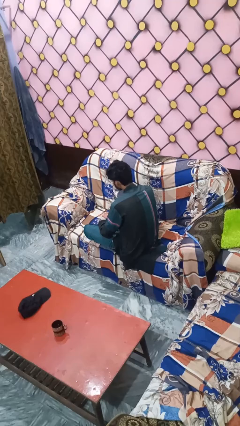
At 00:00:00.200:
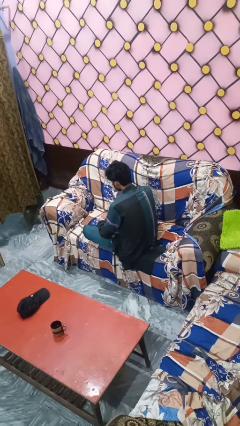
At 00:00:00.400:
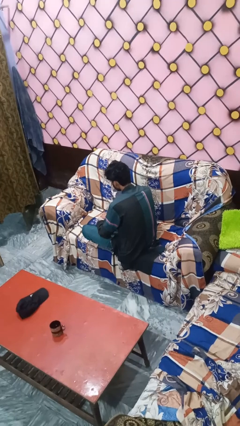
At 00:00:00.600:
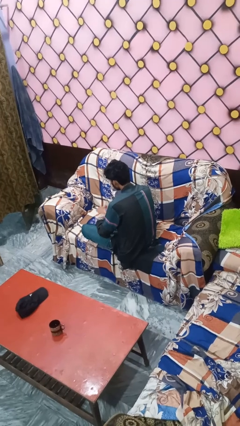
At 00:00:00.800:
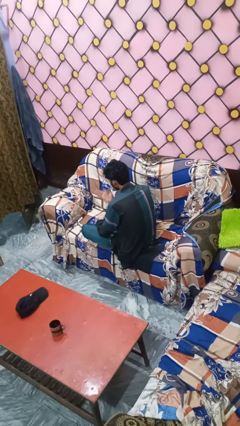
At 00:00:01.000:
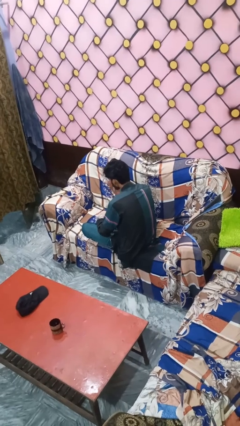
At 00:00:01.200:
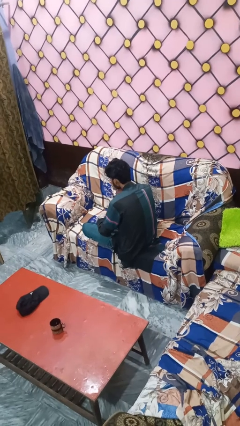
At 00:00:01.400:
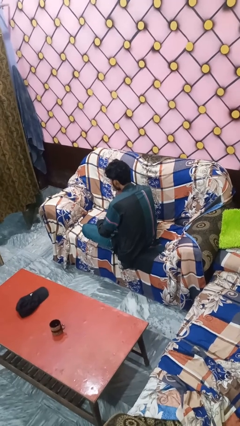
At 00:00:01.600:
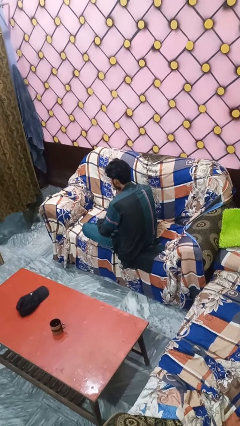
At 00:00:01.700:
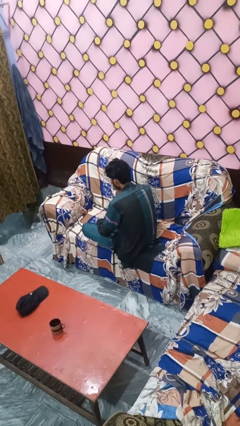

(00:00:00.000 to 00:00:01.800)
person gestures blow kiss

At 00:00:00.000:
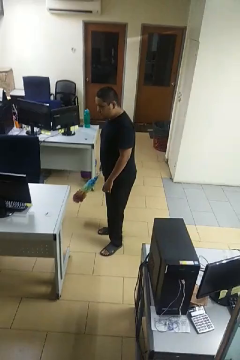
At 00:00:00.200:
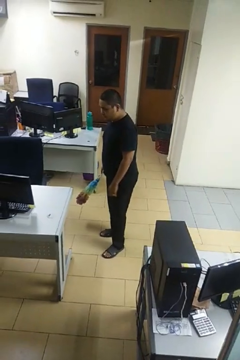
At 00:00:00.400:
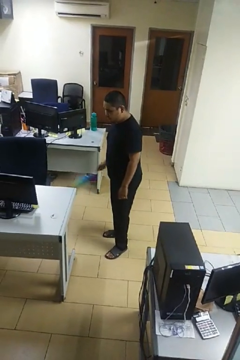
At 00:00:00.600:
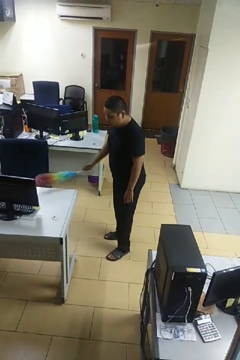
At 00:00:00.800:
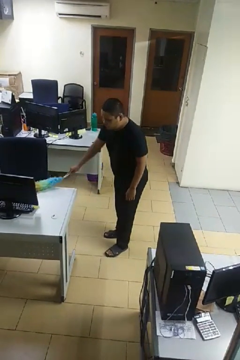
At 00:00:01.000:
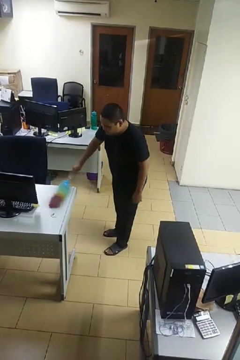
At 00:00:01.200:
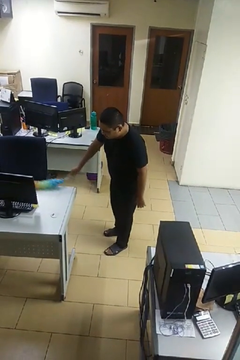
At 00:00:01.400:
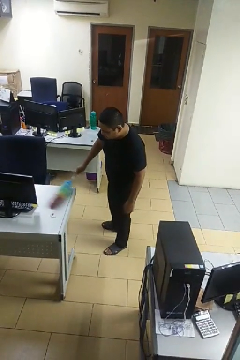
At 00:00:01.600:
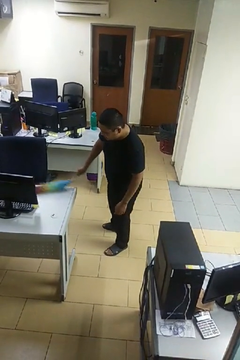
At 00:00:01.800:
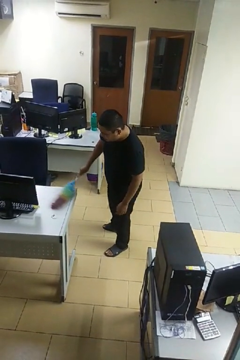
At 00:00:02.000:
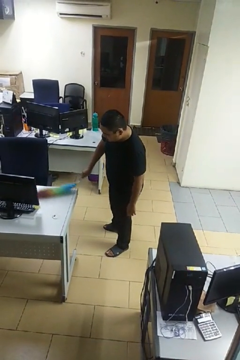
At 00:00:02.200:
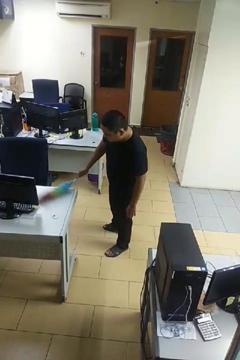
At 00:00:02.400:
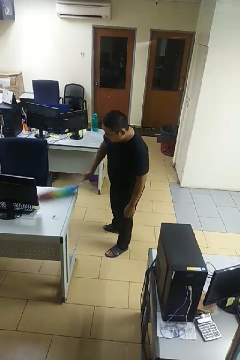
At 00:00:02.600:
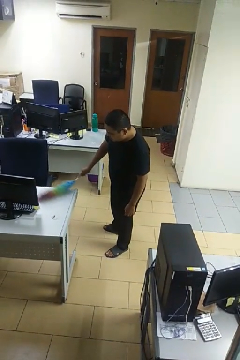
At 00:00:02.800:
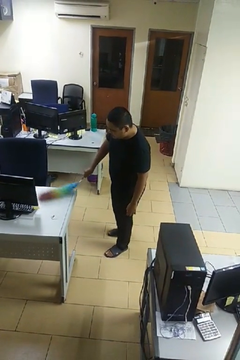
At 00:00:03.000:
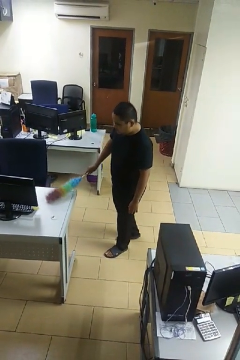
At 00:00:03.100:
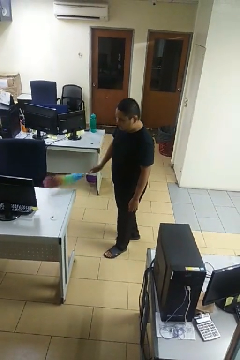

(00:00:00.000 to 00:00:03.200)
person dusts furniture

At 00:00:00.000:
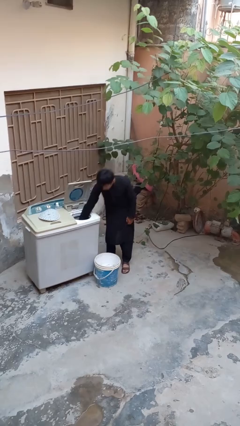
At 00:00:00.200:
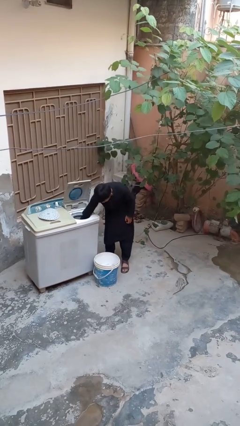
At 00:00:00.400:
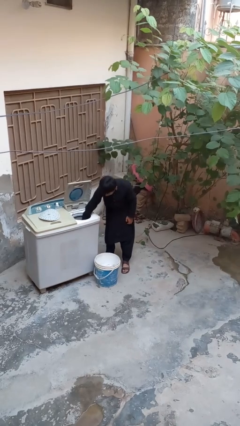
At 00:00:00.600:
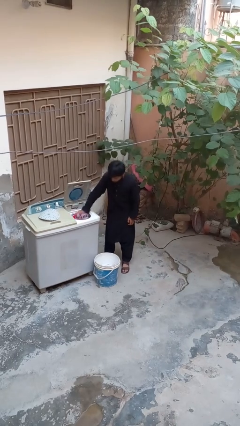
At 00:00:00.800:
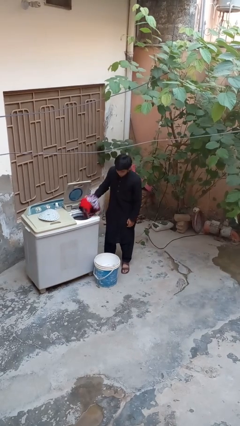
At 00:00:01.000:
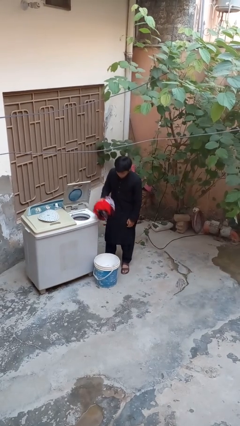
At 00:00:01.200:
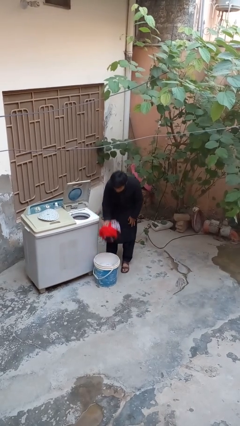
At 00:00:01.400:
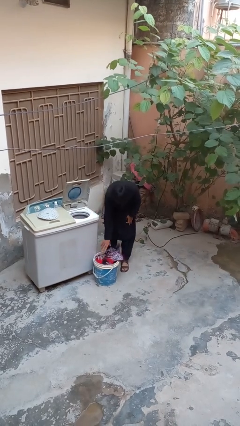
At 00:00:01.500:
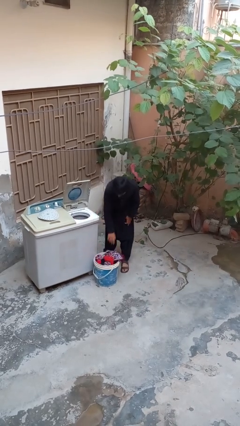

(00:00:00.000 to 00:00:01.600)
person unloads dryer

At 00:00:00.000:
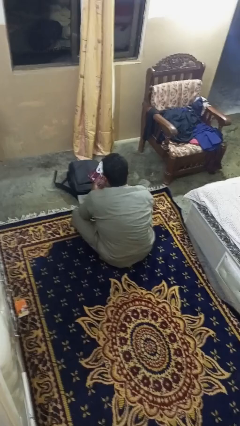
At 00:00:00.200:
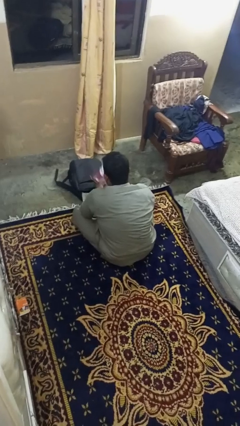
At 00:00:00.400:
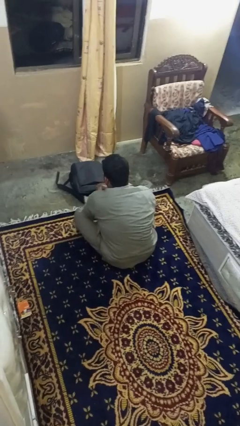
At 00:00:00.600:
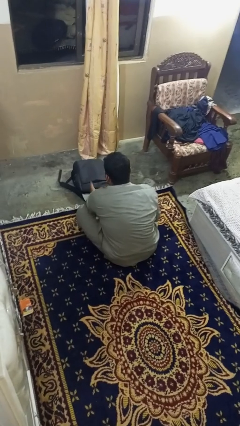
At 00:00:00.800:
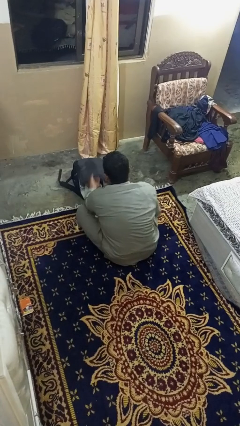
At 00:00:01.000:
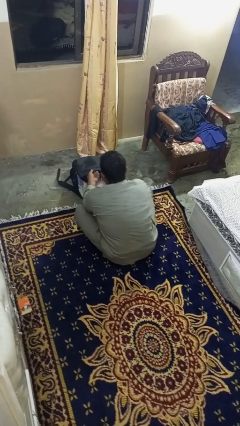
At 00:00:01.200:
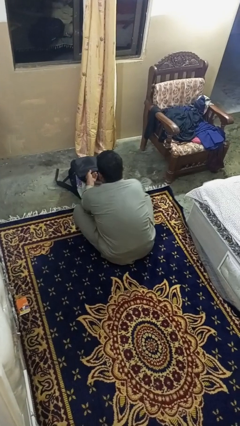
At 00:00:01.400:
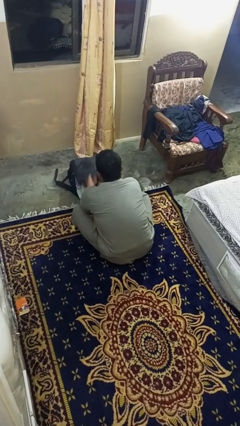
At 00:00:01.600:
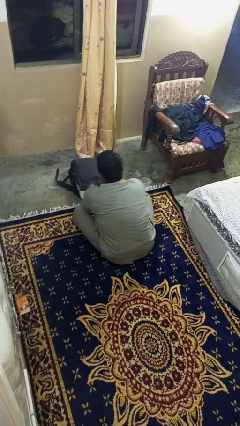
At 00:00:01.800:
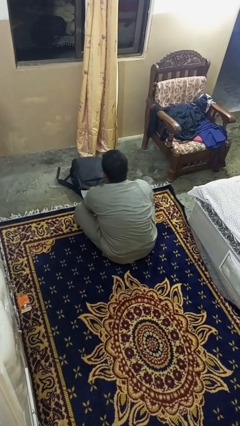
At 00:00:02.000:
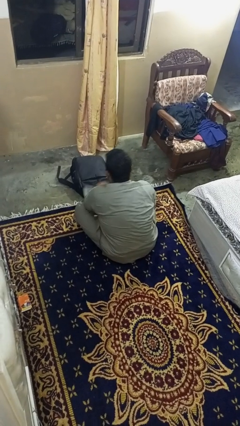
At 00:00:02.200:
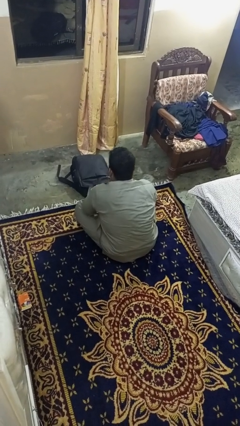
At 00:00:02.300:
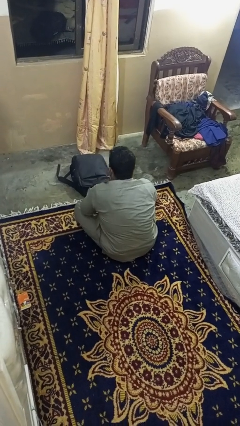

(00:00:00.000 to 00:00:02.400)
person puts object into bag

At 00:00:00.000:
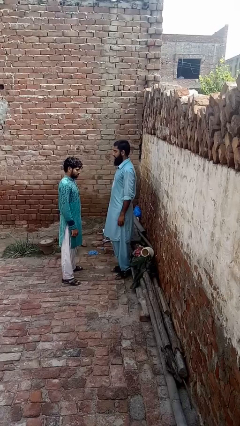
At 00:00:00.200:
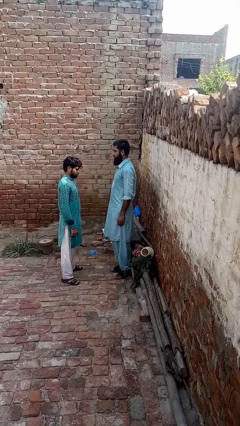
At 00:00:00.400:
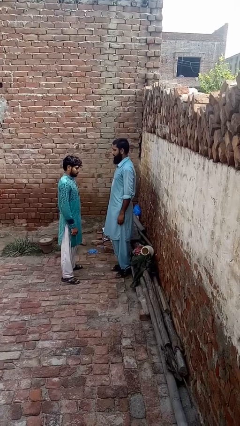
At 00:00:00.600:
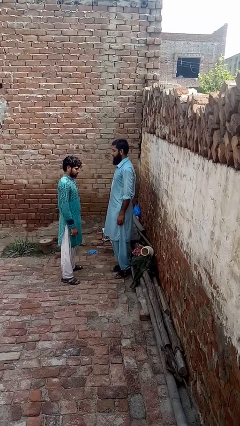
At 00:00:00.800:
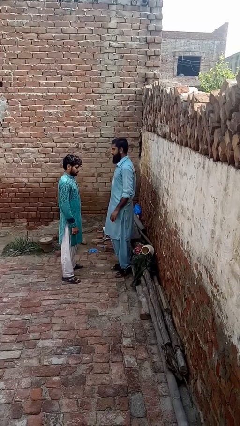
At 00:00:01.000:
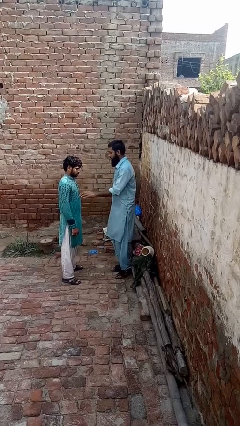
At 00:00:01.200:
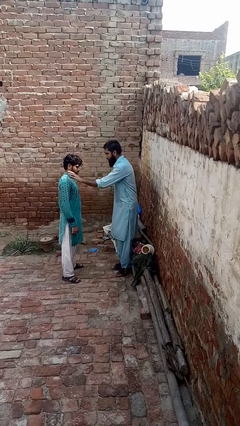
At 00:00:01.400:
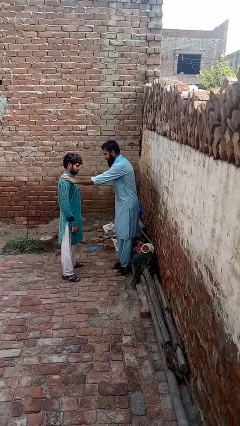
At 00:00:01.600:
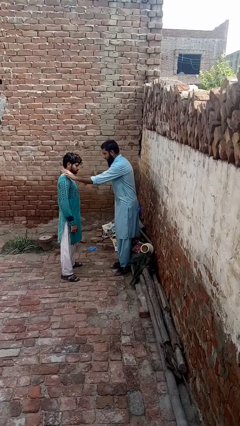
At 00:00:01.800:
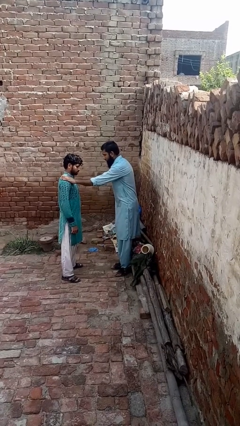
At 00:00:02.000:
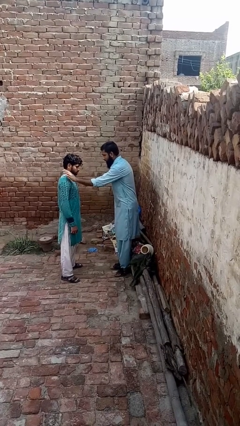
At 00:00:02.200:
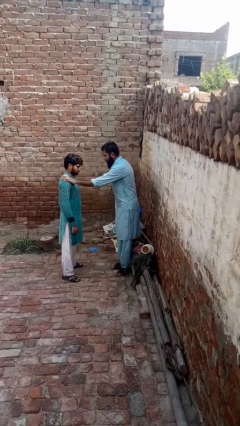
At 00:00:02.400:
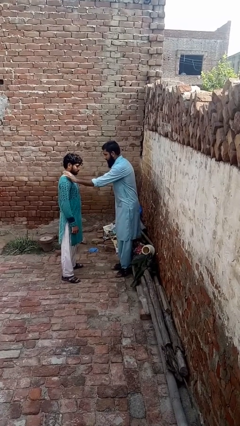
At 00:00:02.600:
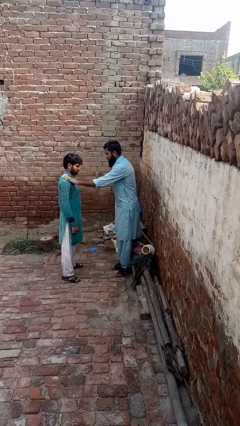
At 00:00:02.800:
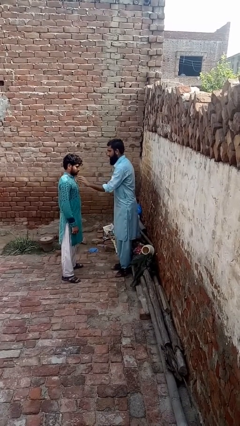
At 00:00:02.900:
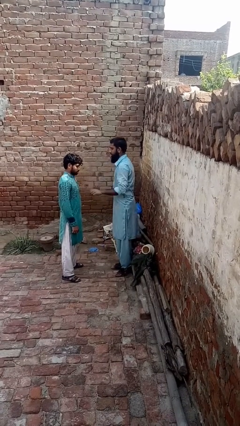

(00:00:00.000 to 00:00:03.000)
person pounds shoulders of person

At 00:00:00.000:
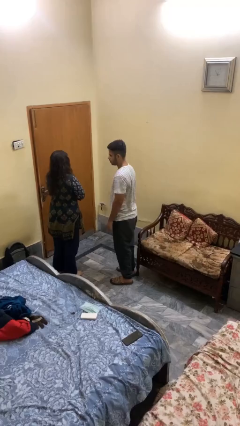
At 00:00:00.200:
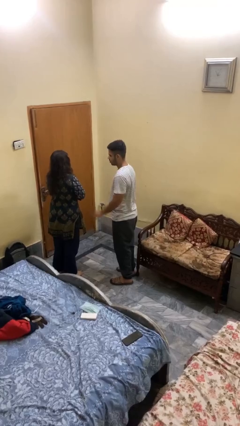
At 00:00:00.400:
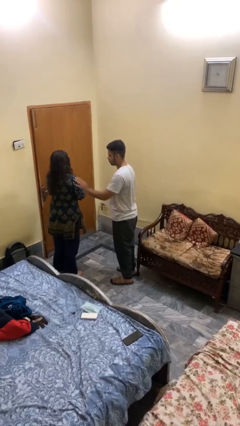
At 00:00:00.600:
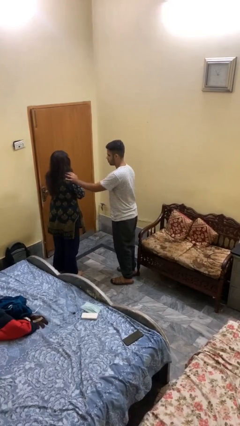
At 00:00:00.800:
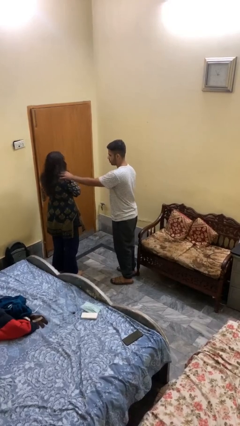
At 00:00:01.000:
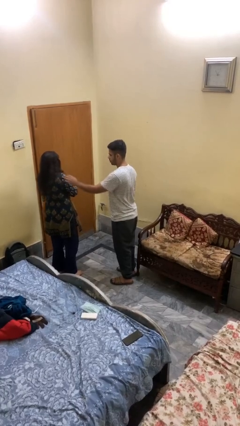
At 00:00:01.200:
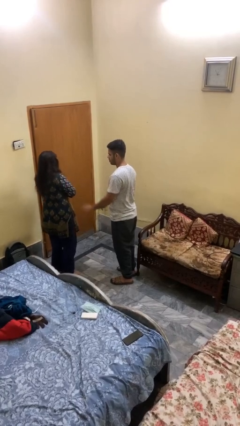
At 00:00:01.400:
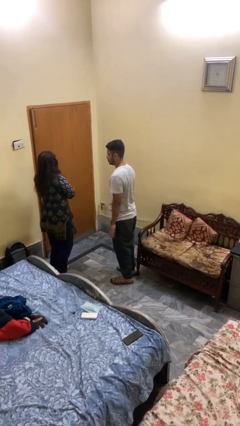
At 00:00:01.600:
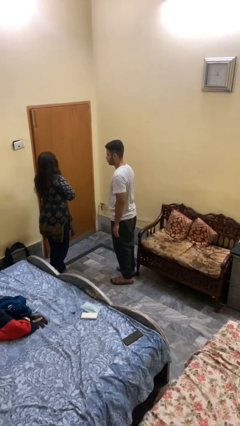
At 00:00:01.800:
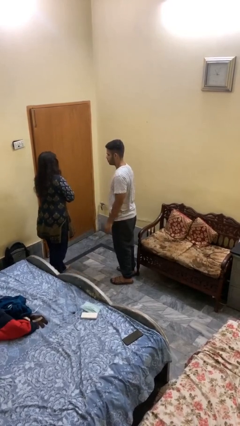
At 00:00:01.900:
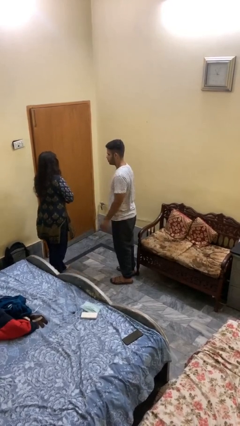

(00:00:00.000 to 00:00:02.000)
person shoves person

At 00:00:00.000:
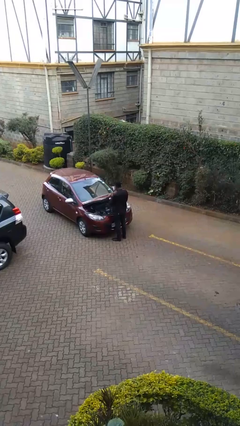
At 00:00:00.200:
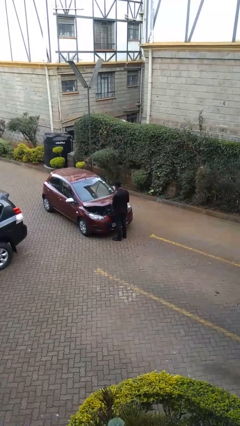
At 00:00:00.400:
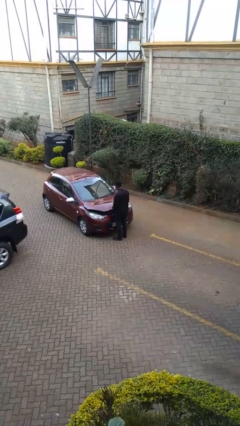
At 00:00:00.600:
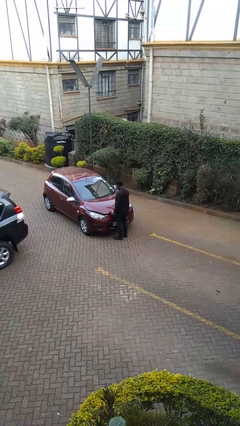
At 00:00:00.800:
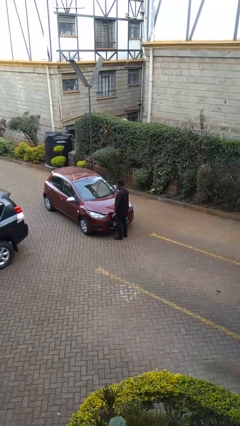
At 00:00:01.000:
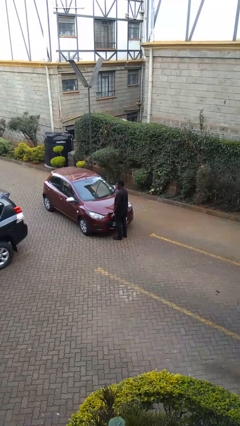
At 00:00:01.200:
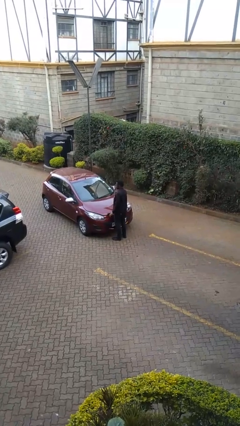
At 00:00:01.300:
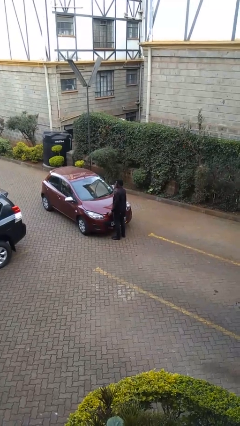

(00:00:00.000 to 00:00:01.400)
person closes car hood

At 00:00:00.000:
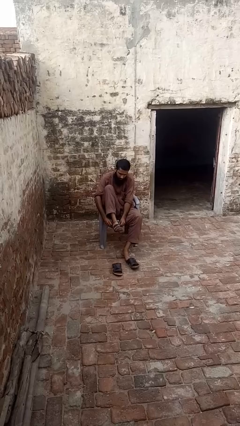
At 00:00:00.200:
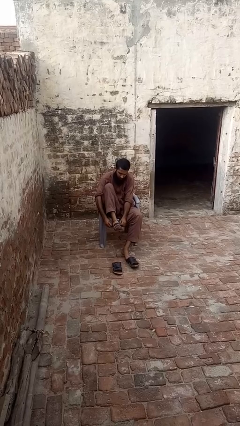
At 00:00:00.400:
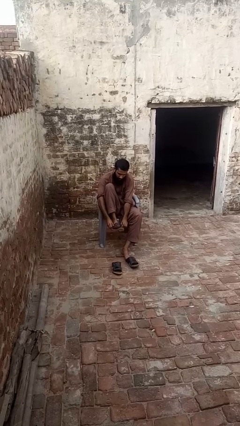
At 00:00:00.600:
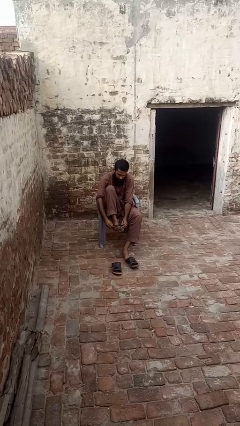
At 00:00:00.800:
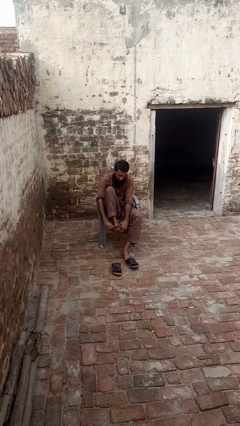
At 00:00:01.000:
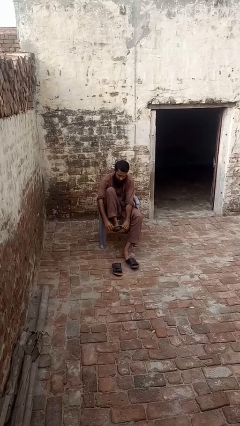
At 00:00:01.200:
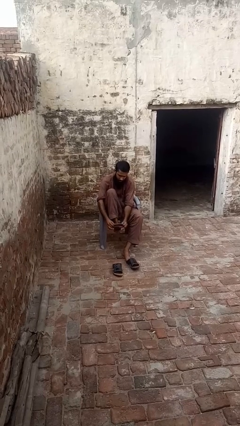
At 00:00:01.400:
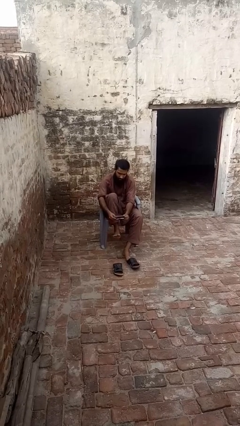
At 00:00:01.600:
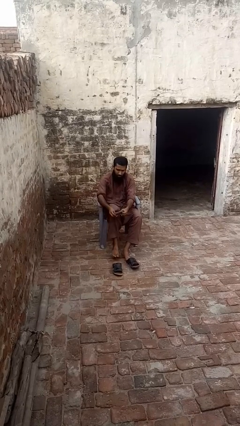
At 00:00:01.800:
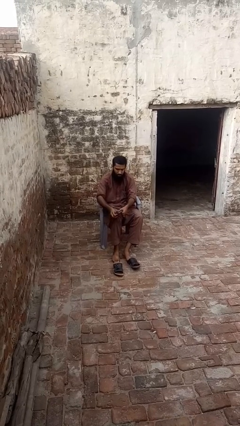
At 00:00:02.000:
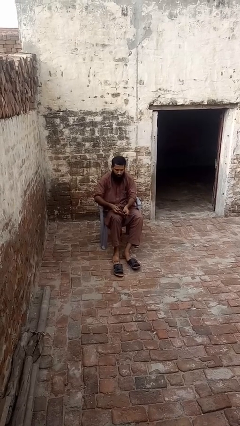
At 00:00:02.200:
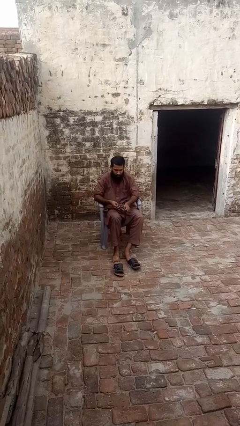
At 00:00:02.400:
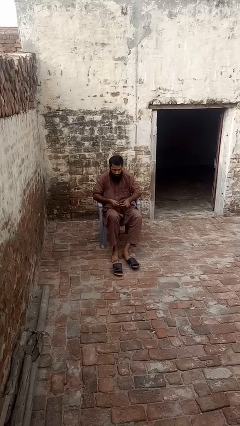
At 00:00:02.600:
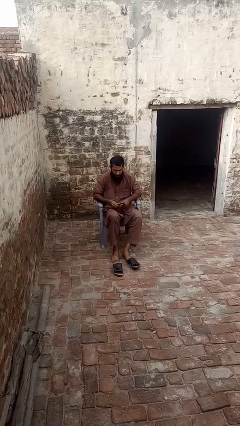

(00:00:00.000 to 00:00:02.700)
person takes off socks
